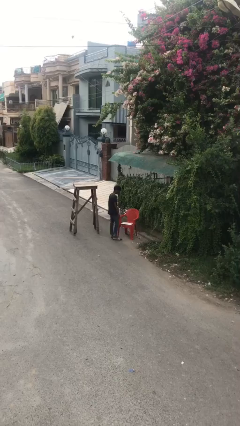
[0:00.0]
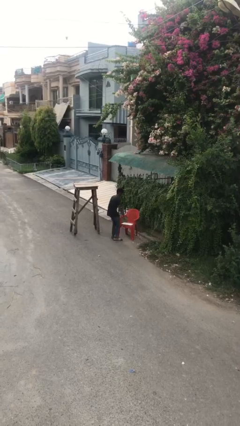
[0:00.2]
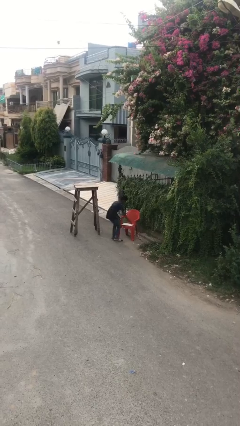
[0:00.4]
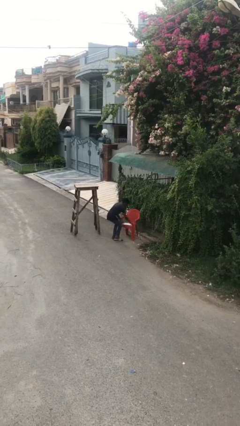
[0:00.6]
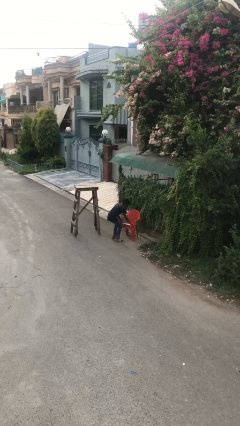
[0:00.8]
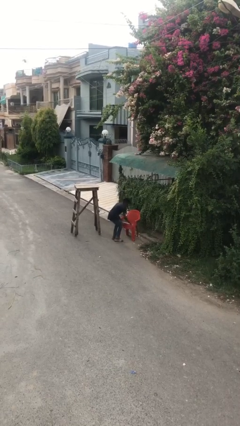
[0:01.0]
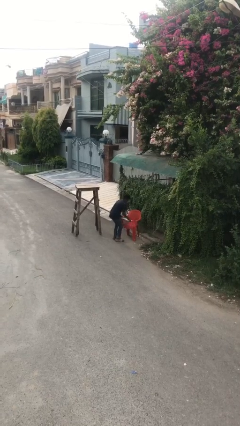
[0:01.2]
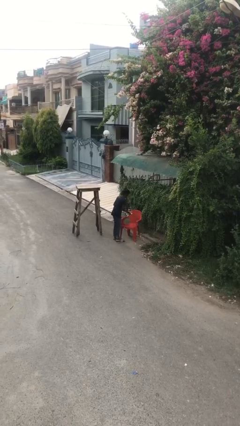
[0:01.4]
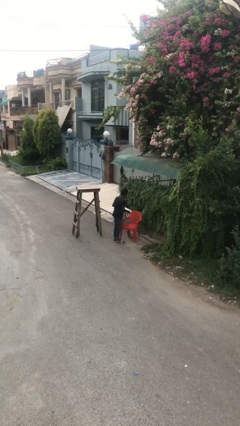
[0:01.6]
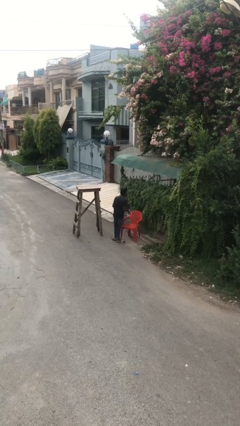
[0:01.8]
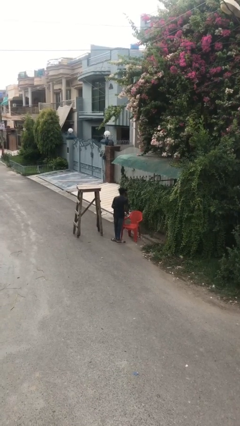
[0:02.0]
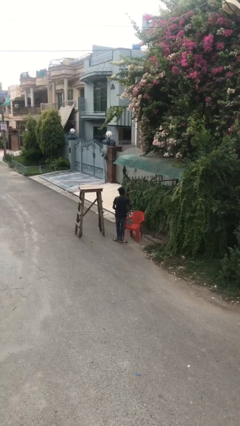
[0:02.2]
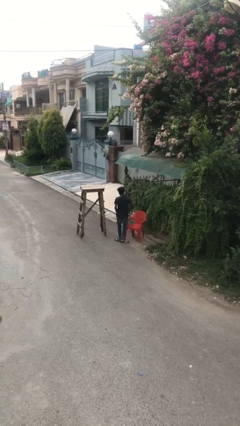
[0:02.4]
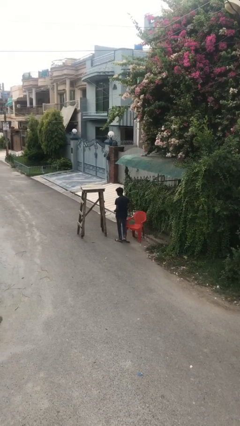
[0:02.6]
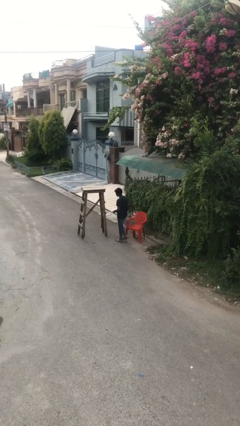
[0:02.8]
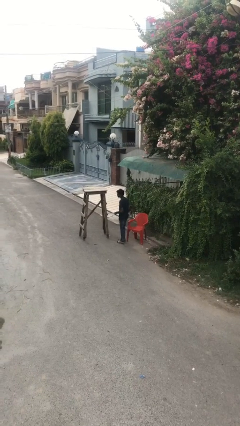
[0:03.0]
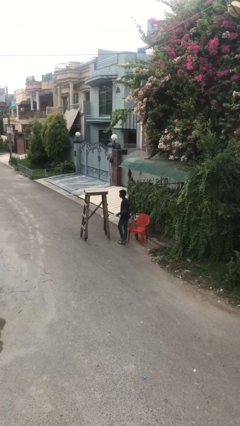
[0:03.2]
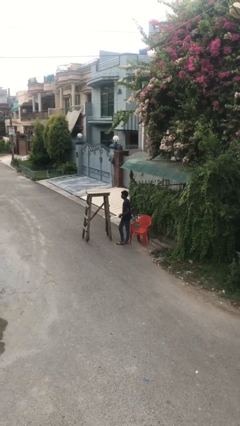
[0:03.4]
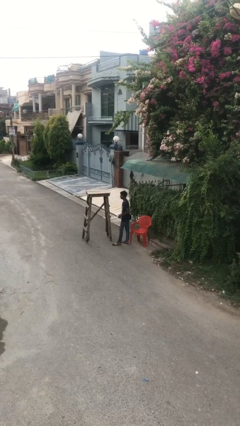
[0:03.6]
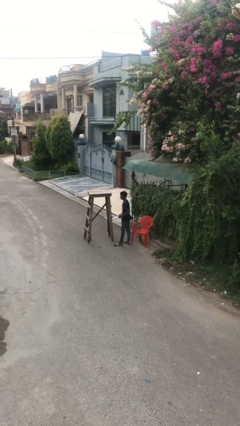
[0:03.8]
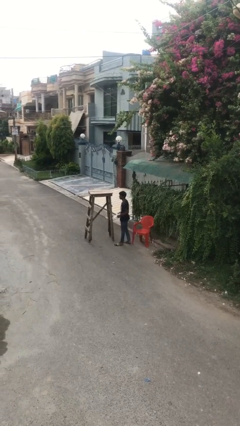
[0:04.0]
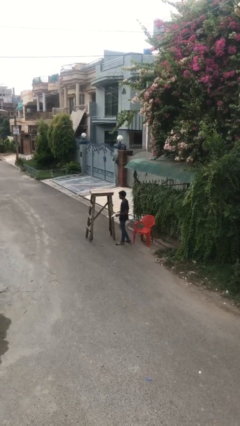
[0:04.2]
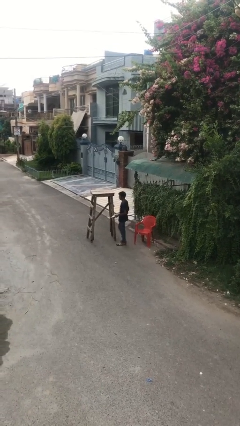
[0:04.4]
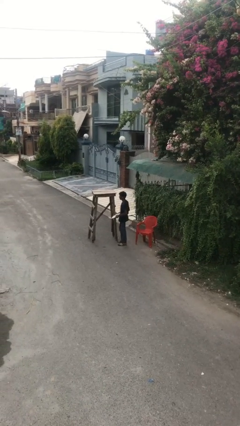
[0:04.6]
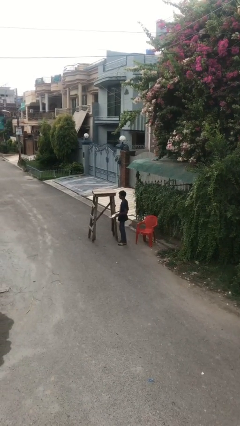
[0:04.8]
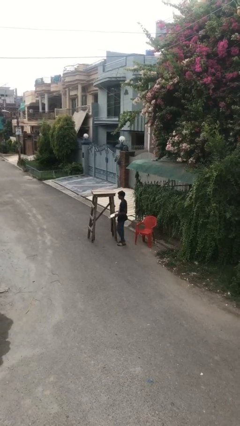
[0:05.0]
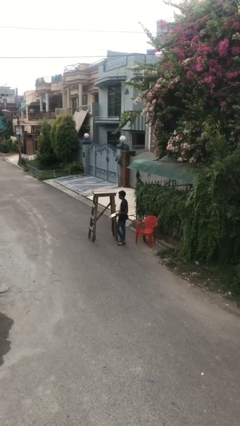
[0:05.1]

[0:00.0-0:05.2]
person picks up object from table

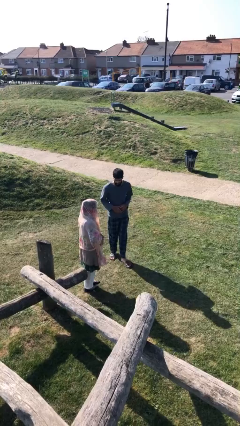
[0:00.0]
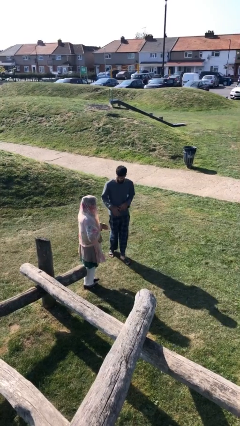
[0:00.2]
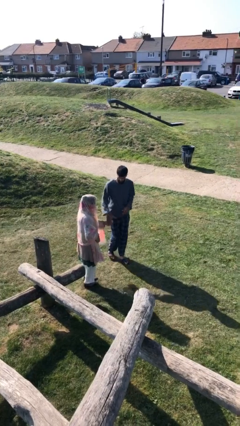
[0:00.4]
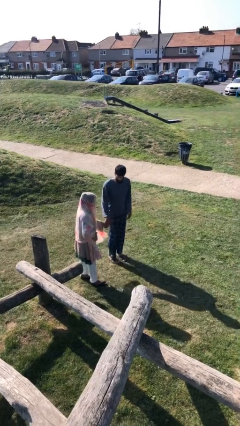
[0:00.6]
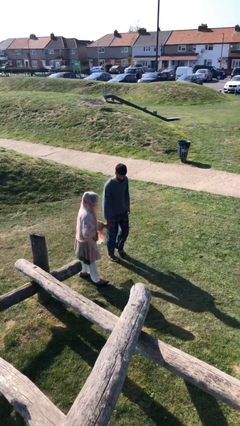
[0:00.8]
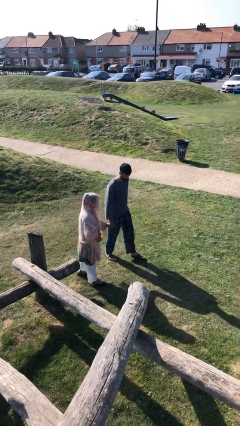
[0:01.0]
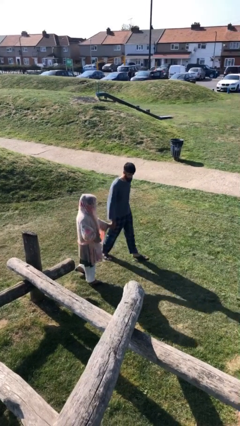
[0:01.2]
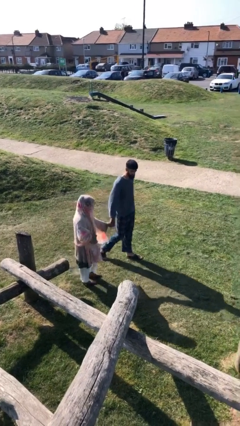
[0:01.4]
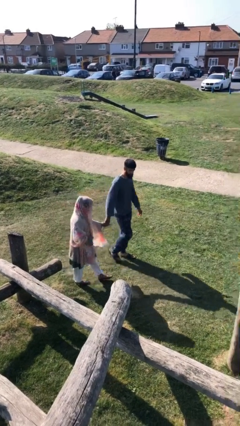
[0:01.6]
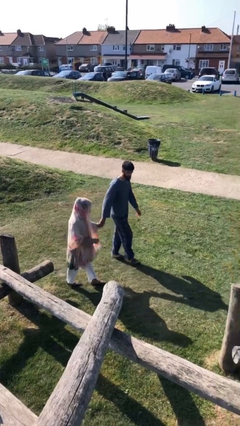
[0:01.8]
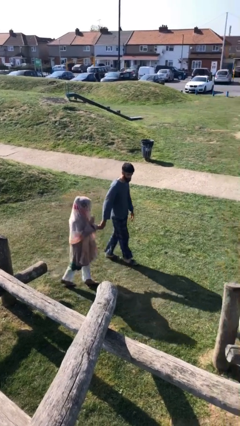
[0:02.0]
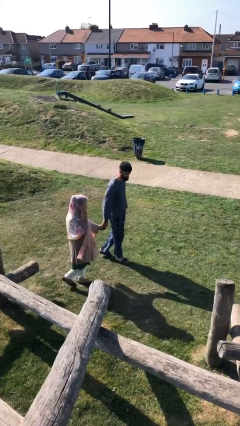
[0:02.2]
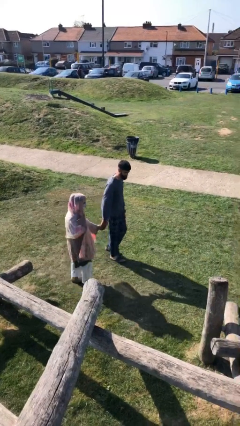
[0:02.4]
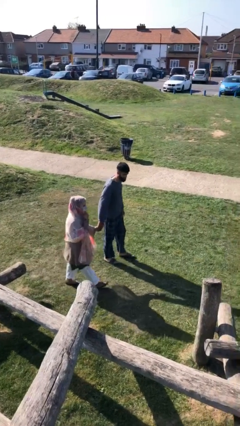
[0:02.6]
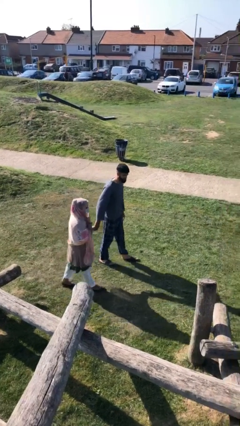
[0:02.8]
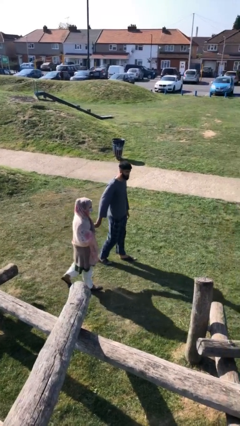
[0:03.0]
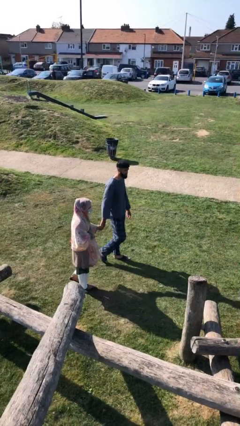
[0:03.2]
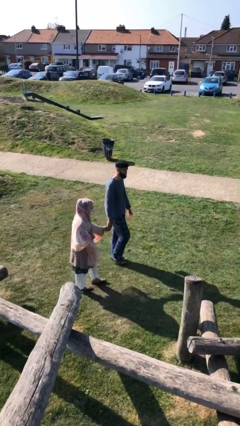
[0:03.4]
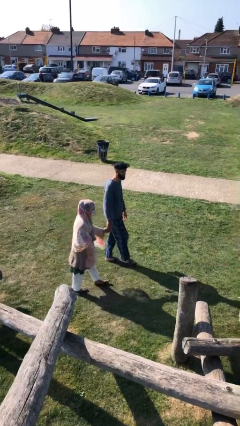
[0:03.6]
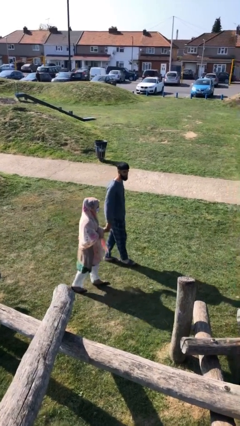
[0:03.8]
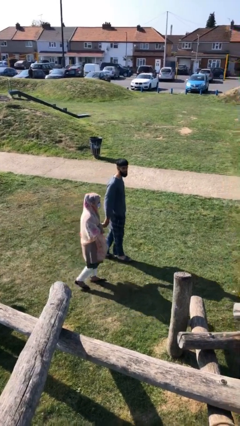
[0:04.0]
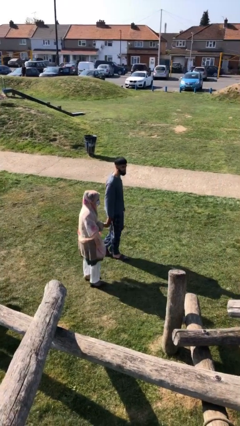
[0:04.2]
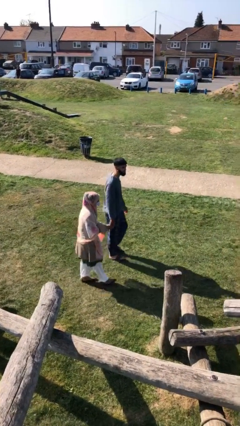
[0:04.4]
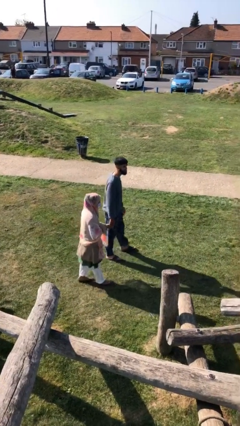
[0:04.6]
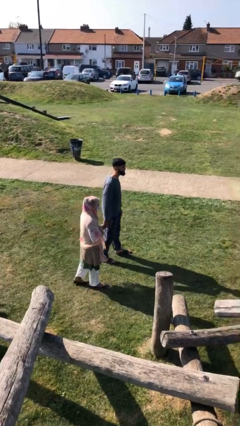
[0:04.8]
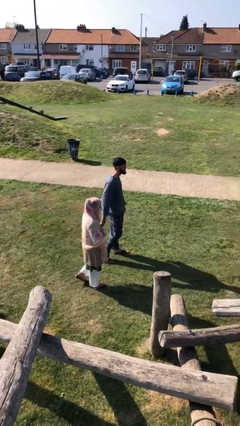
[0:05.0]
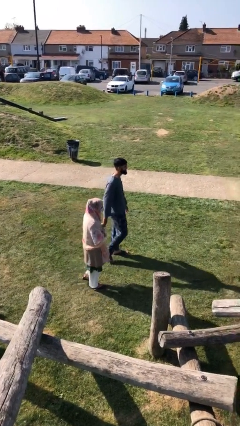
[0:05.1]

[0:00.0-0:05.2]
person holds hand

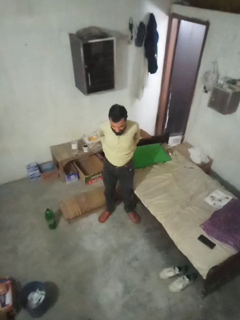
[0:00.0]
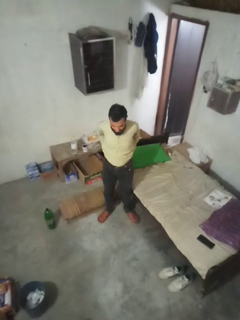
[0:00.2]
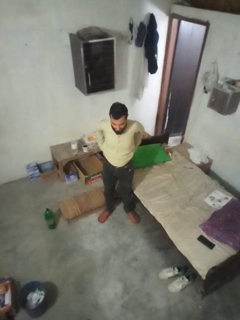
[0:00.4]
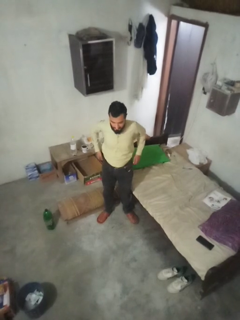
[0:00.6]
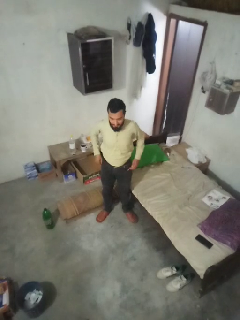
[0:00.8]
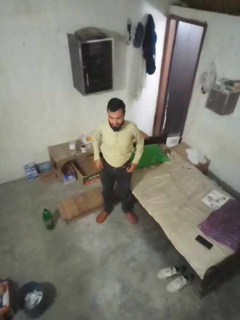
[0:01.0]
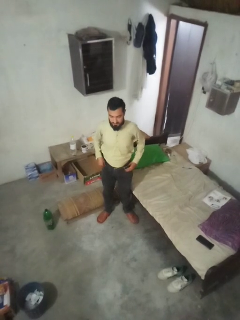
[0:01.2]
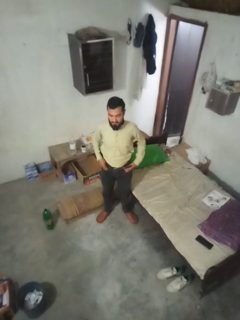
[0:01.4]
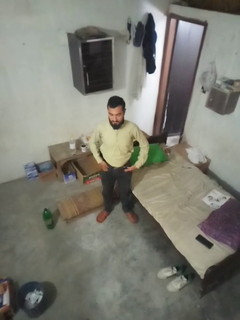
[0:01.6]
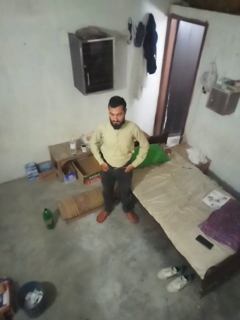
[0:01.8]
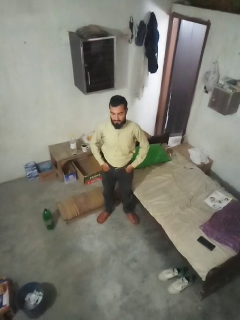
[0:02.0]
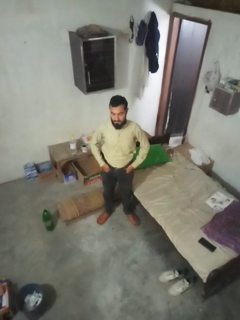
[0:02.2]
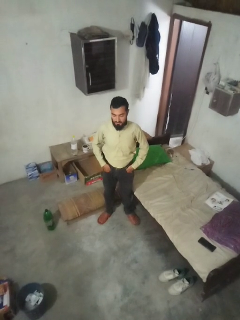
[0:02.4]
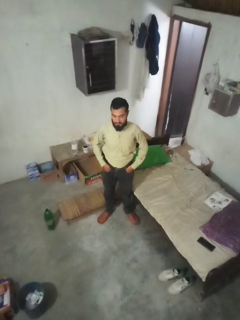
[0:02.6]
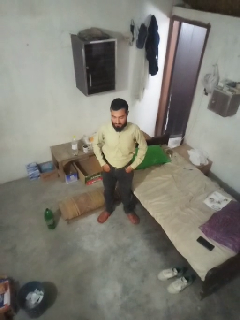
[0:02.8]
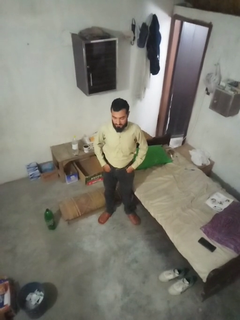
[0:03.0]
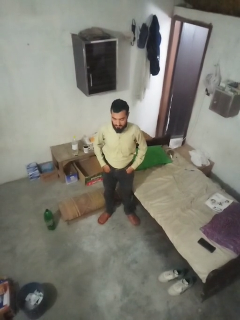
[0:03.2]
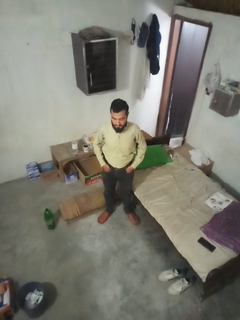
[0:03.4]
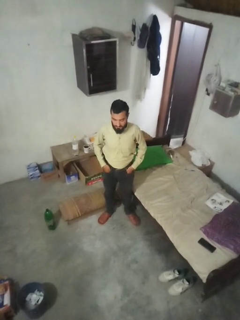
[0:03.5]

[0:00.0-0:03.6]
person puts hands in back pockets

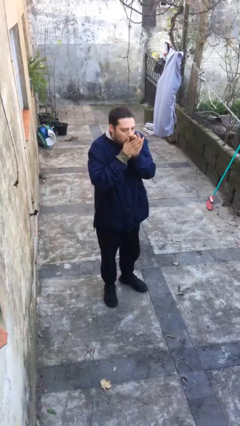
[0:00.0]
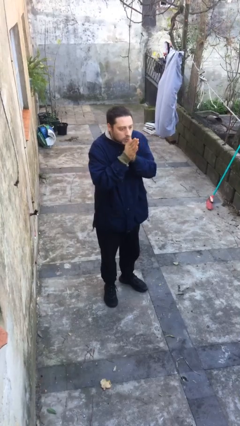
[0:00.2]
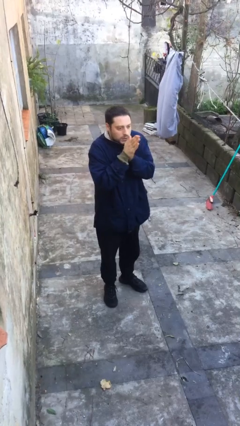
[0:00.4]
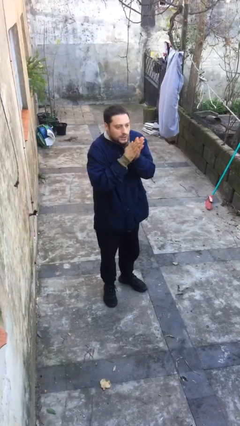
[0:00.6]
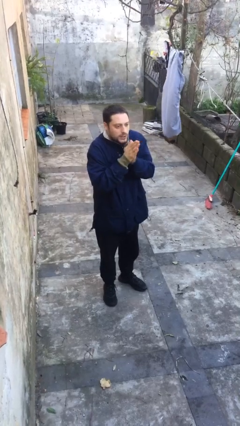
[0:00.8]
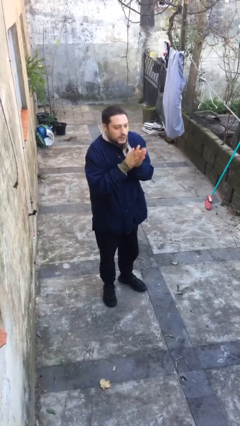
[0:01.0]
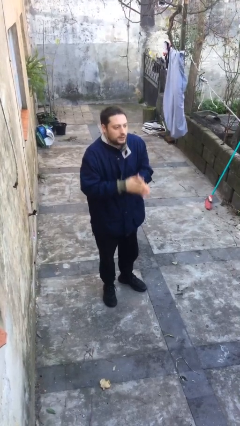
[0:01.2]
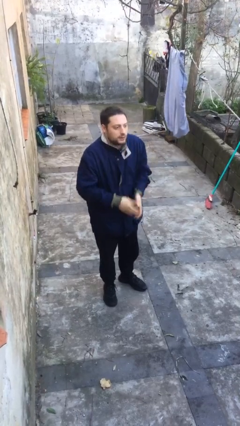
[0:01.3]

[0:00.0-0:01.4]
person blows into hands

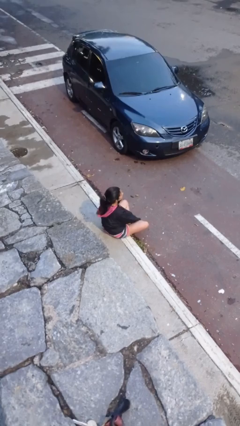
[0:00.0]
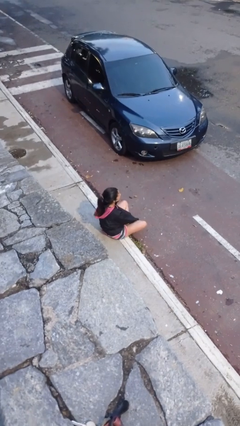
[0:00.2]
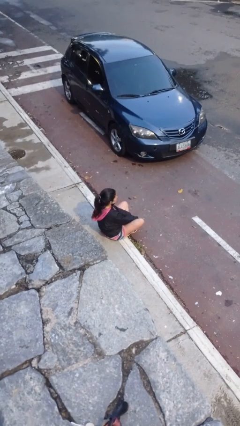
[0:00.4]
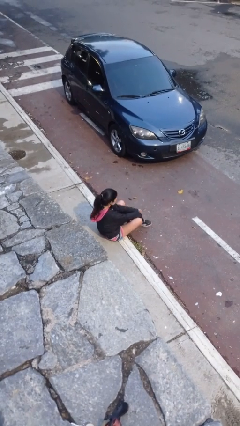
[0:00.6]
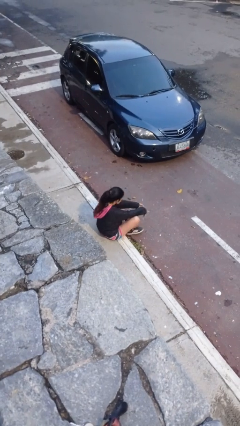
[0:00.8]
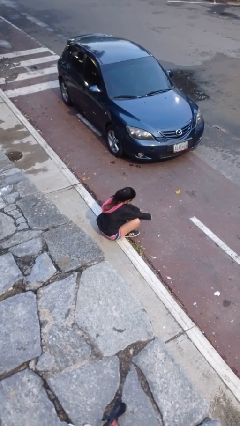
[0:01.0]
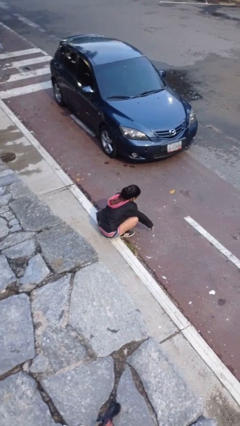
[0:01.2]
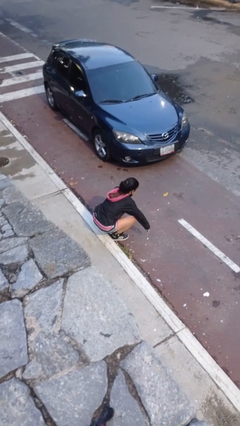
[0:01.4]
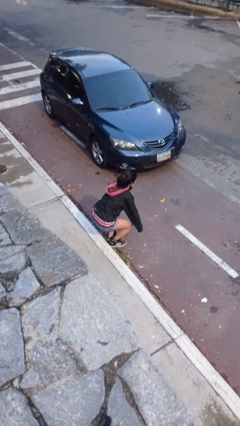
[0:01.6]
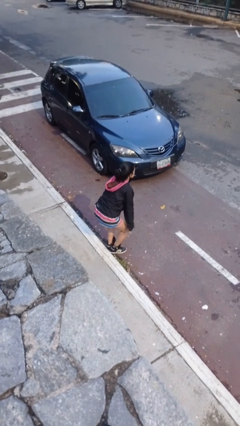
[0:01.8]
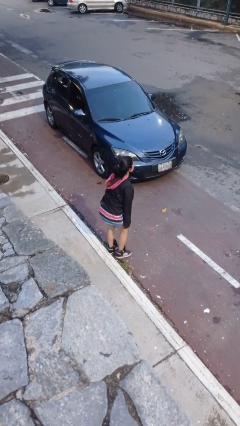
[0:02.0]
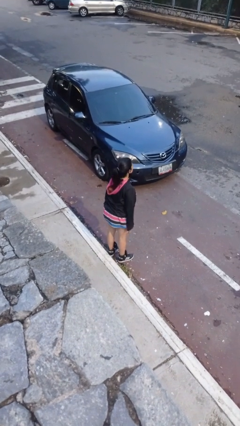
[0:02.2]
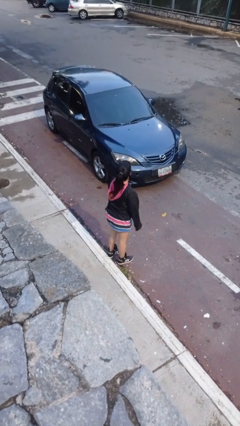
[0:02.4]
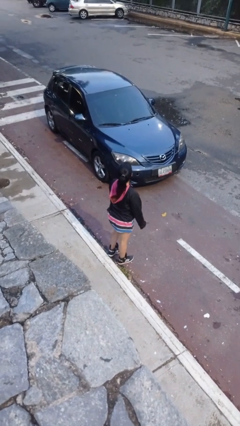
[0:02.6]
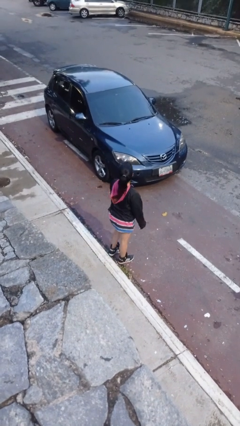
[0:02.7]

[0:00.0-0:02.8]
person stands up from floor

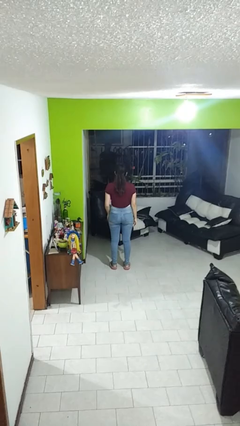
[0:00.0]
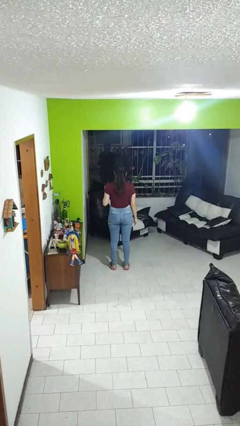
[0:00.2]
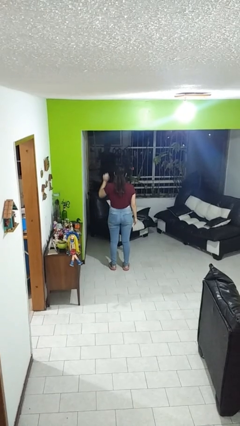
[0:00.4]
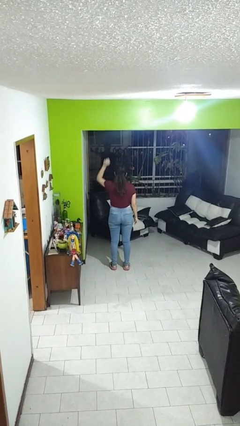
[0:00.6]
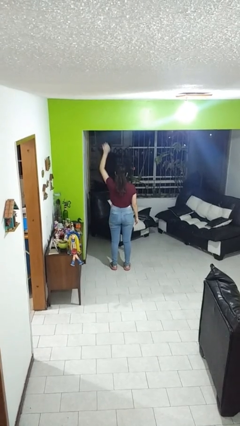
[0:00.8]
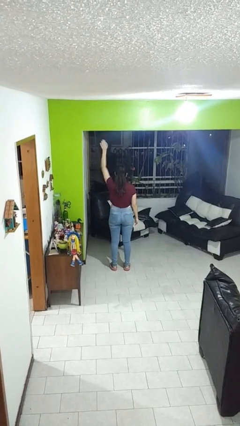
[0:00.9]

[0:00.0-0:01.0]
person gestures raise hand
